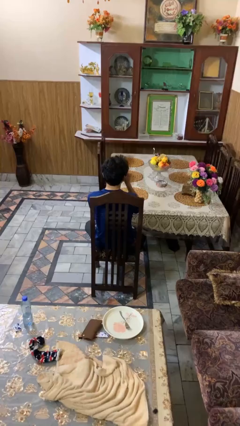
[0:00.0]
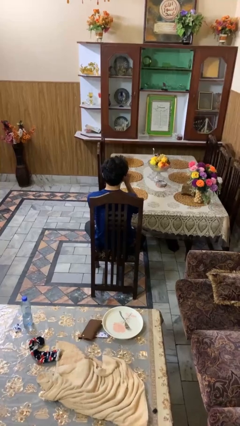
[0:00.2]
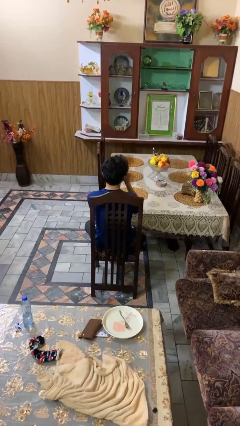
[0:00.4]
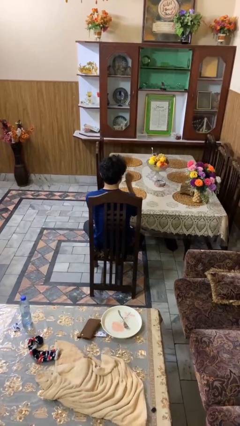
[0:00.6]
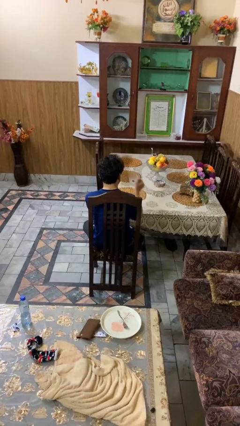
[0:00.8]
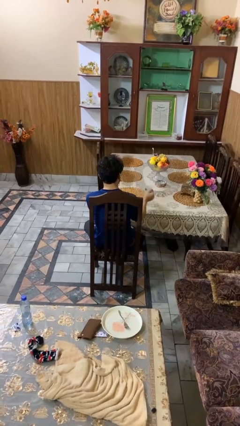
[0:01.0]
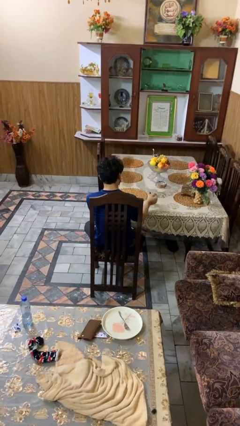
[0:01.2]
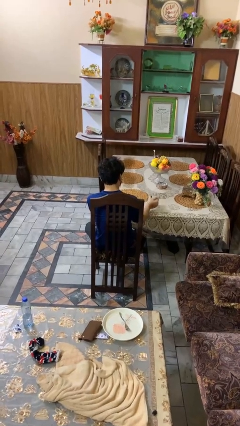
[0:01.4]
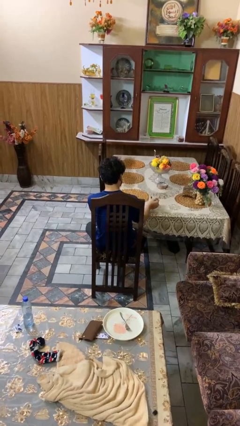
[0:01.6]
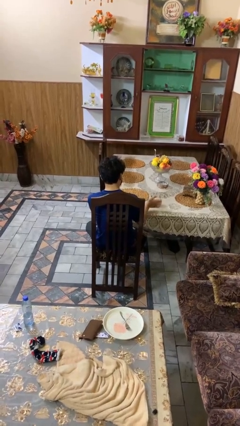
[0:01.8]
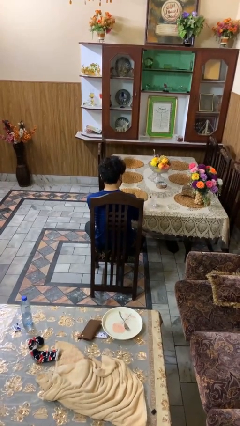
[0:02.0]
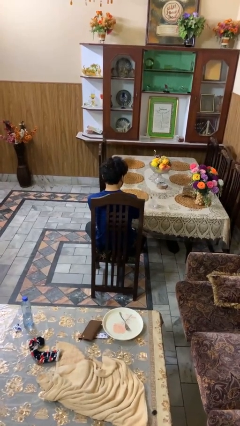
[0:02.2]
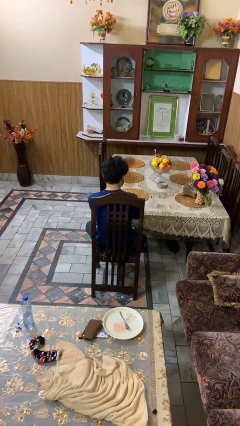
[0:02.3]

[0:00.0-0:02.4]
person puts down object on table

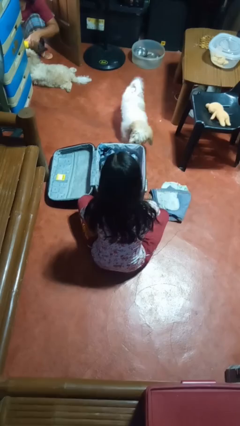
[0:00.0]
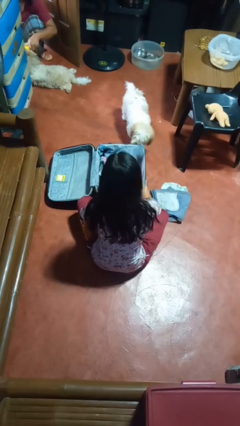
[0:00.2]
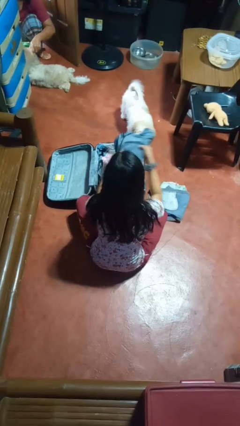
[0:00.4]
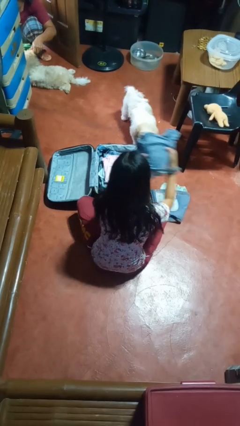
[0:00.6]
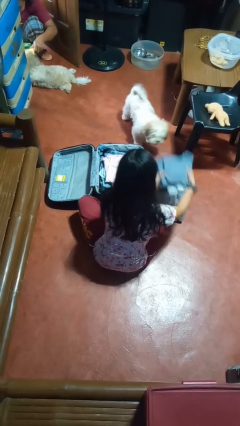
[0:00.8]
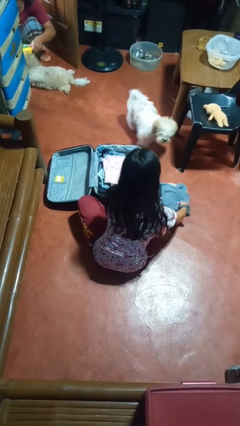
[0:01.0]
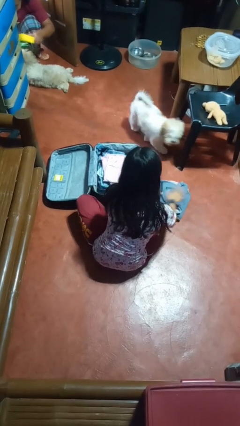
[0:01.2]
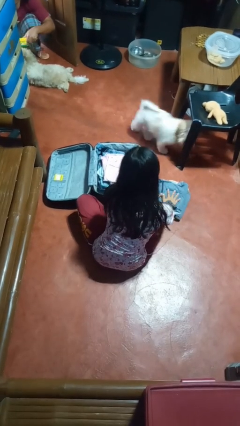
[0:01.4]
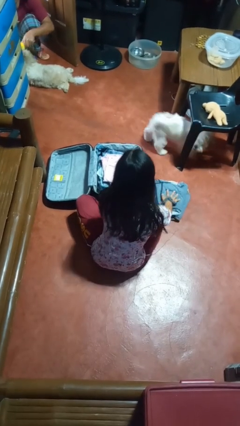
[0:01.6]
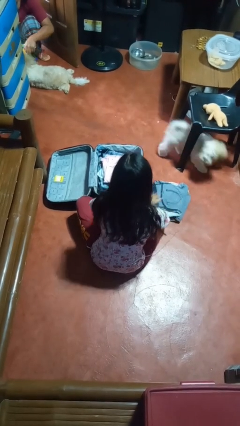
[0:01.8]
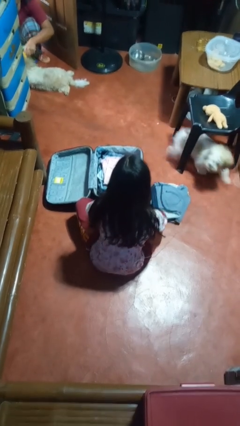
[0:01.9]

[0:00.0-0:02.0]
person unloads clothes from suitcase

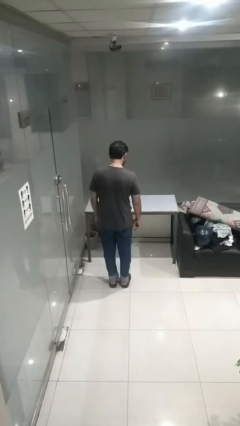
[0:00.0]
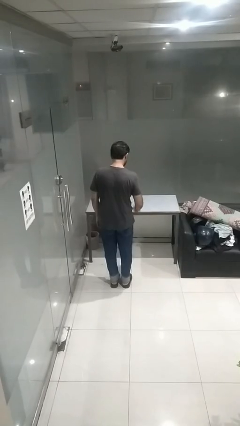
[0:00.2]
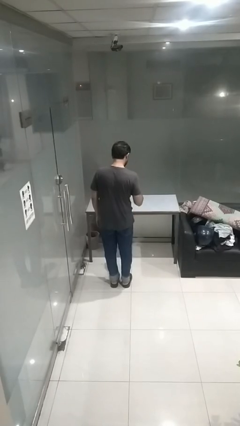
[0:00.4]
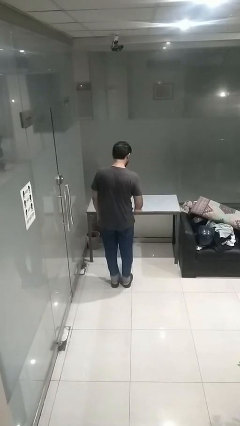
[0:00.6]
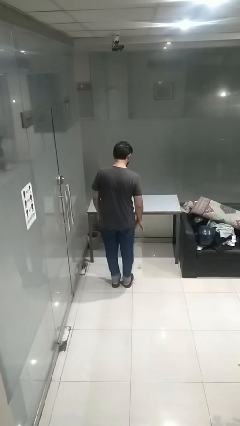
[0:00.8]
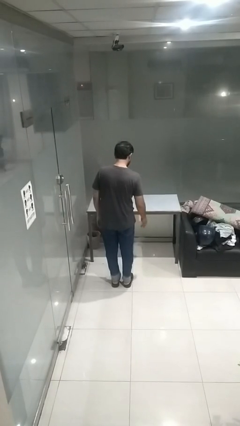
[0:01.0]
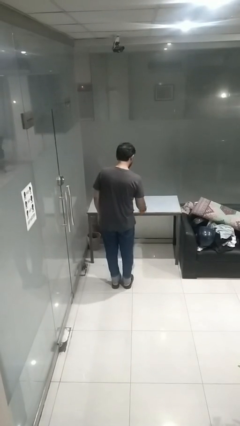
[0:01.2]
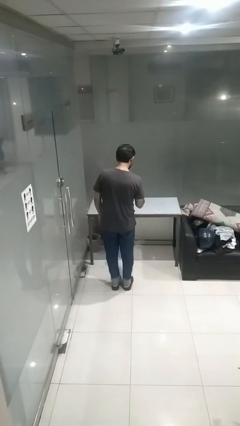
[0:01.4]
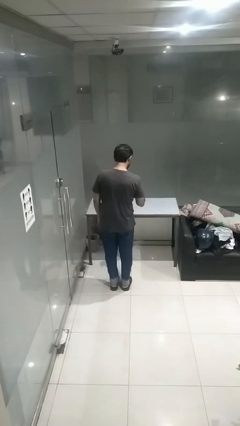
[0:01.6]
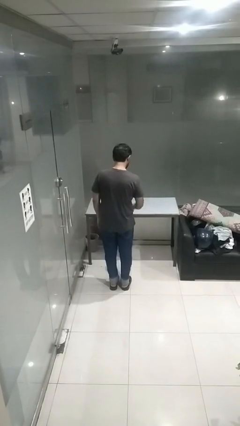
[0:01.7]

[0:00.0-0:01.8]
person bounces ball on floor

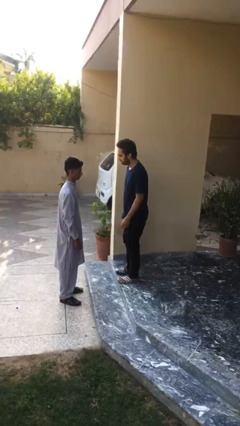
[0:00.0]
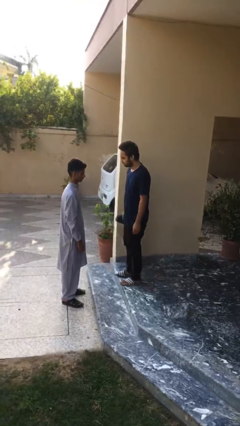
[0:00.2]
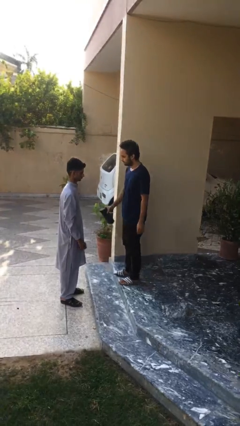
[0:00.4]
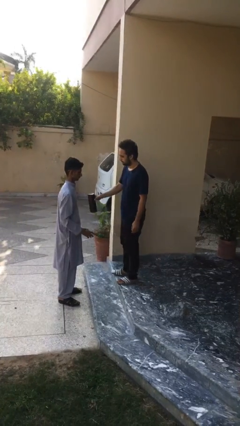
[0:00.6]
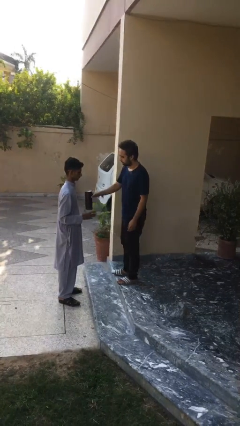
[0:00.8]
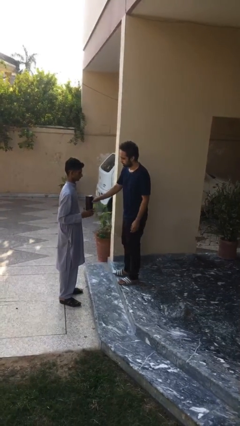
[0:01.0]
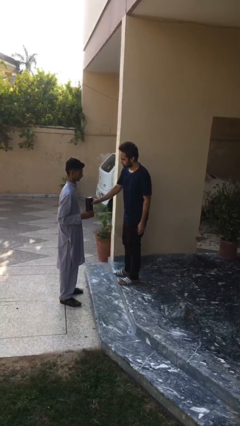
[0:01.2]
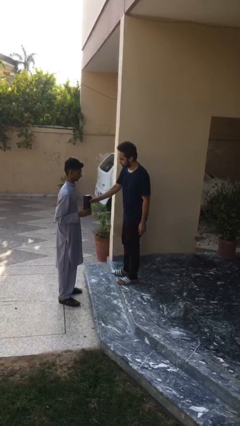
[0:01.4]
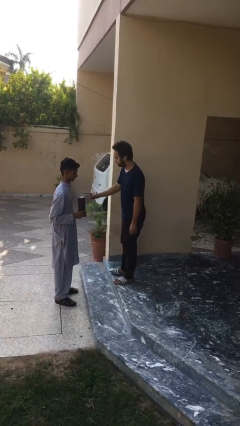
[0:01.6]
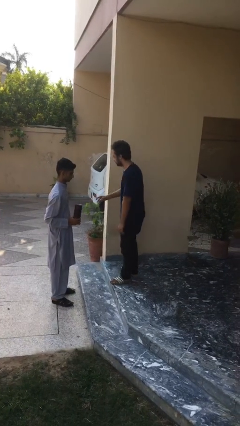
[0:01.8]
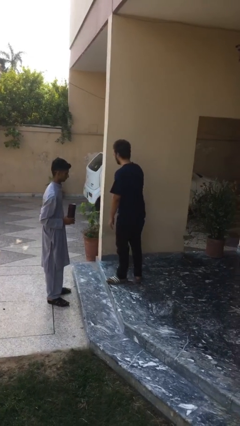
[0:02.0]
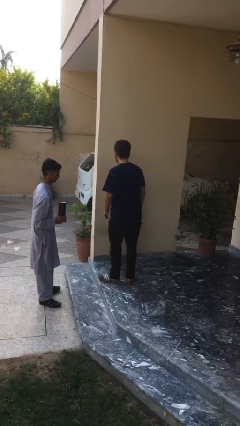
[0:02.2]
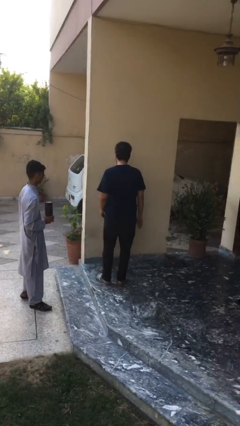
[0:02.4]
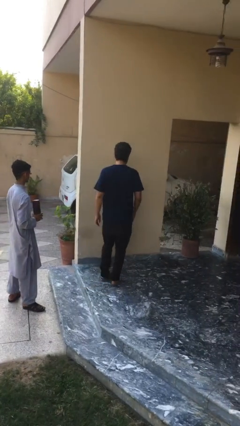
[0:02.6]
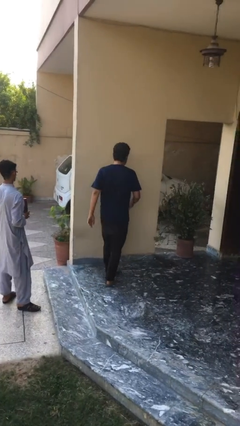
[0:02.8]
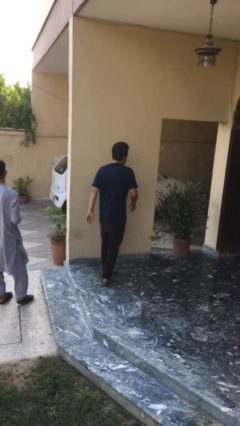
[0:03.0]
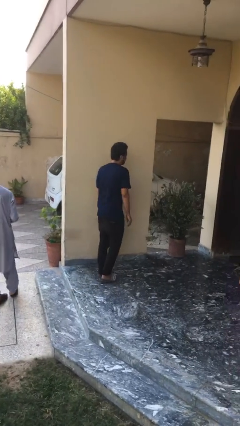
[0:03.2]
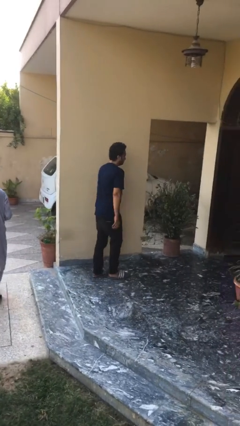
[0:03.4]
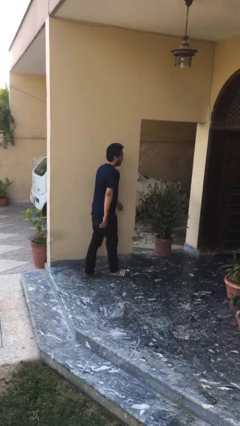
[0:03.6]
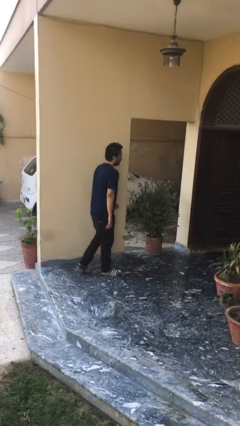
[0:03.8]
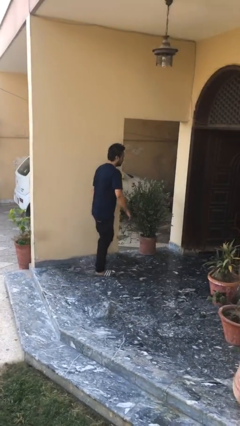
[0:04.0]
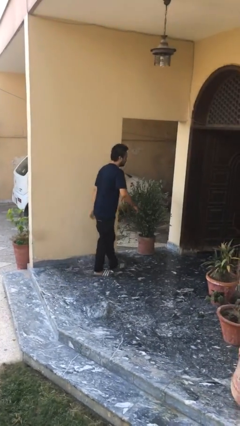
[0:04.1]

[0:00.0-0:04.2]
person transfers object to person

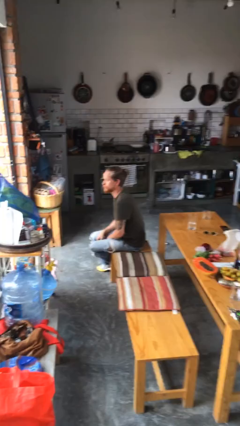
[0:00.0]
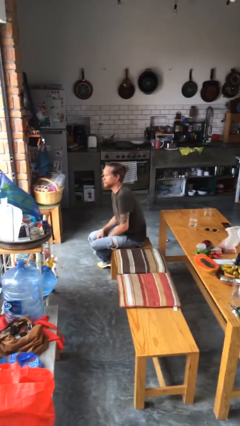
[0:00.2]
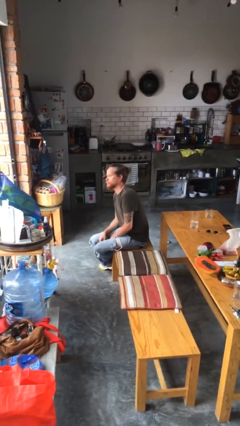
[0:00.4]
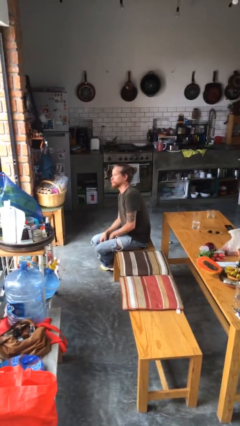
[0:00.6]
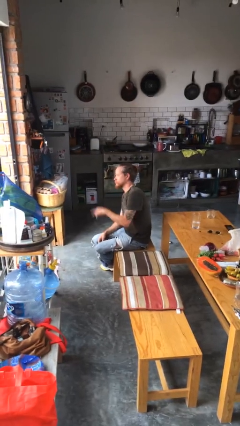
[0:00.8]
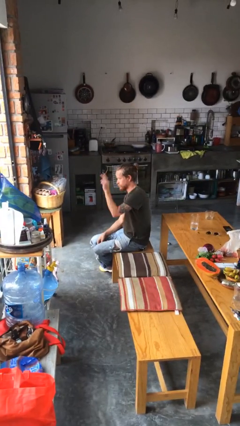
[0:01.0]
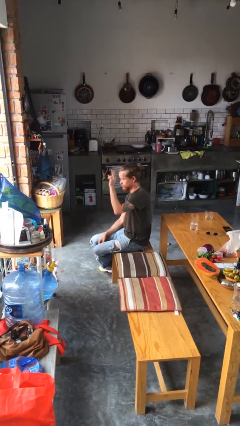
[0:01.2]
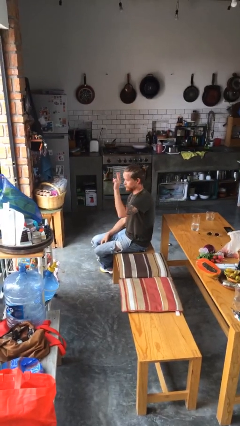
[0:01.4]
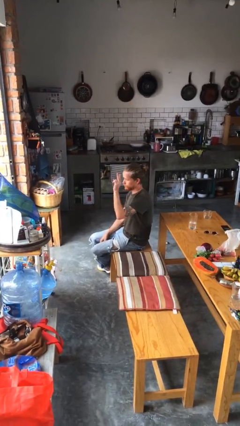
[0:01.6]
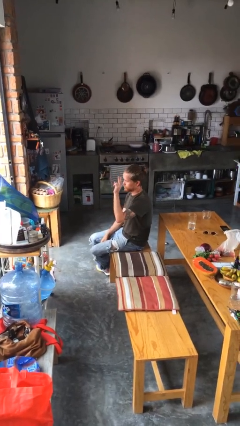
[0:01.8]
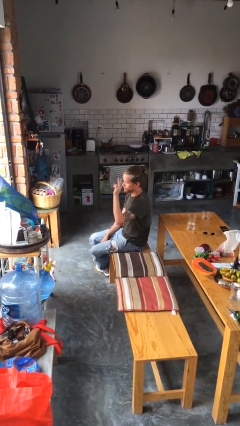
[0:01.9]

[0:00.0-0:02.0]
person gestures raise hand

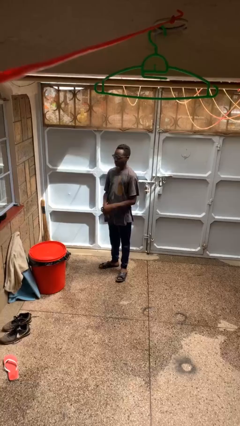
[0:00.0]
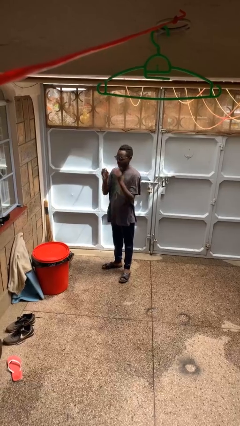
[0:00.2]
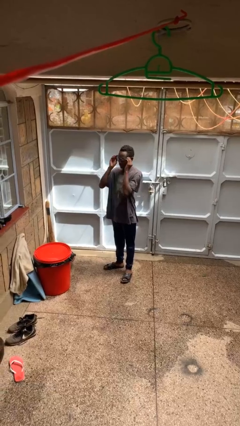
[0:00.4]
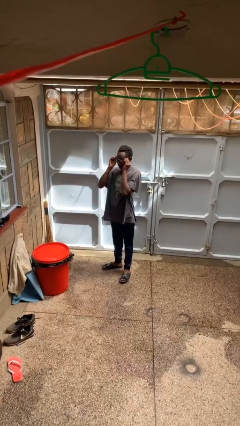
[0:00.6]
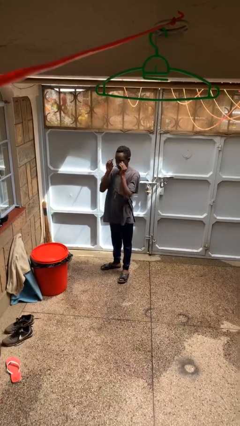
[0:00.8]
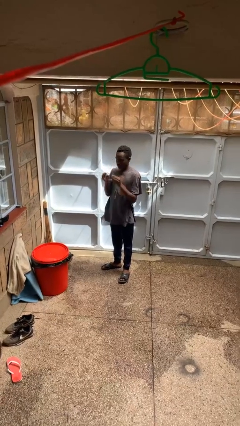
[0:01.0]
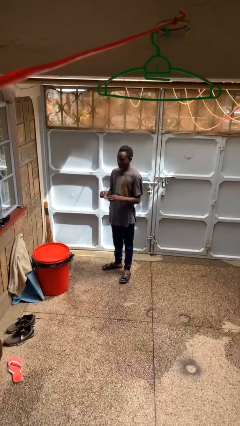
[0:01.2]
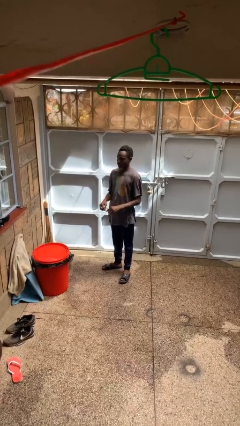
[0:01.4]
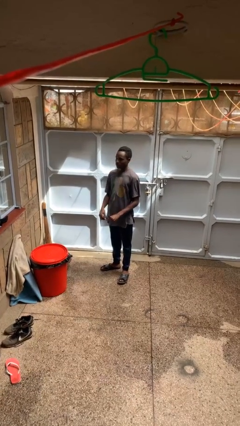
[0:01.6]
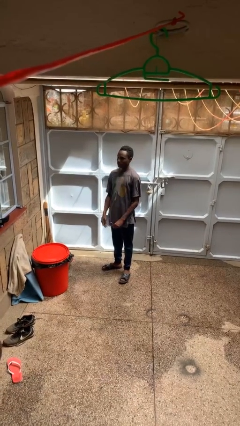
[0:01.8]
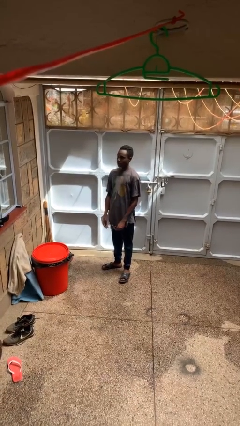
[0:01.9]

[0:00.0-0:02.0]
person takes off glasses

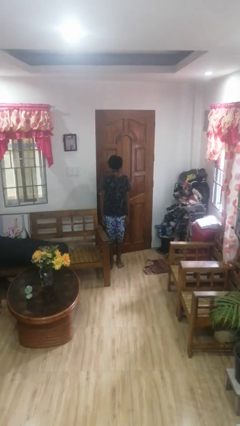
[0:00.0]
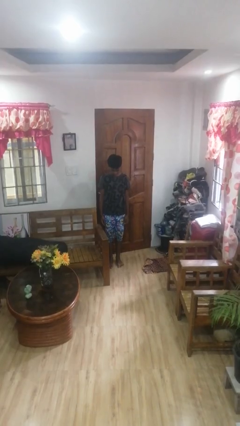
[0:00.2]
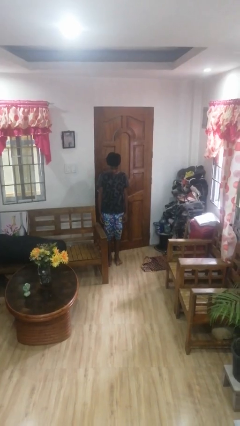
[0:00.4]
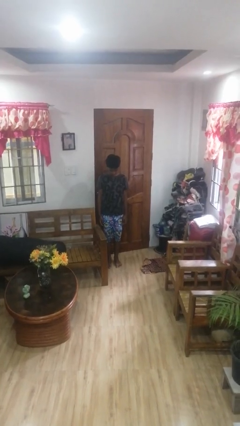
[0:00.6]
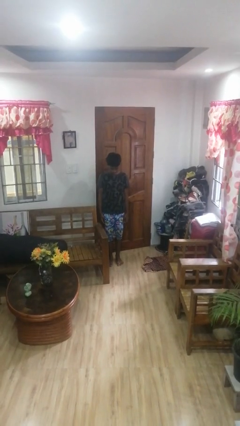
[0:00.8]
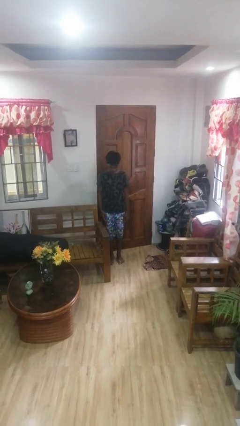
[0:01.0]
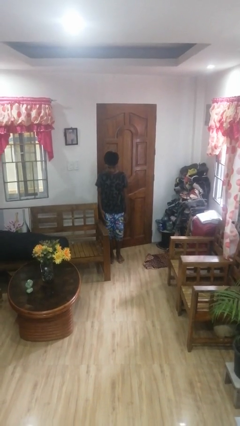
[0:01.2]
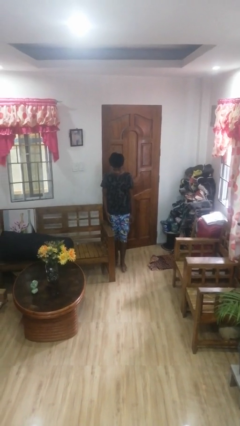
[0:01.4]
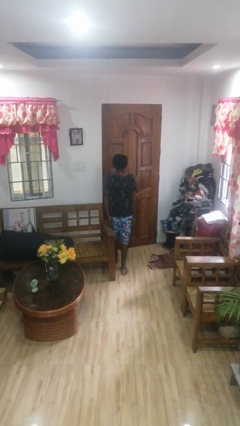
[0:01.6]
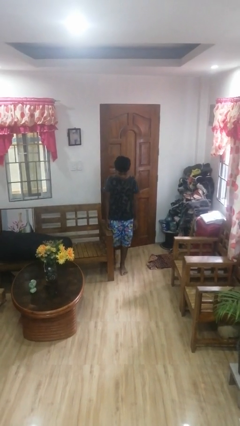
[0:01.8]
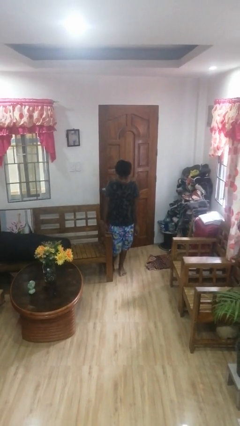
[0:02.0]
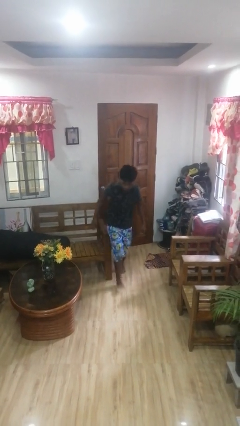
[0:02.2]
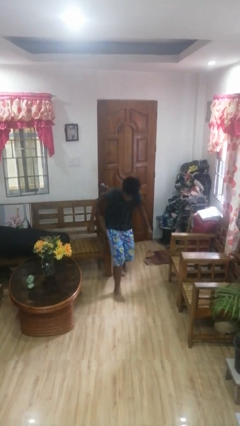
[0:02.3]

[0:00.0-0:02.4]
person trips on object on floor
